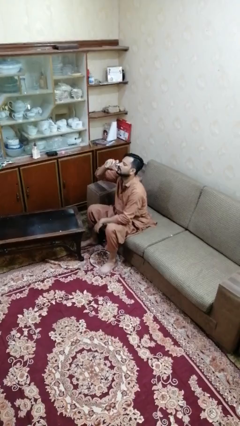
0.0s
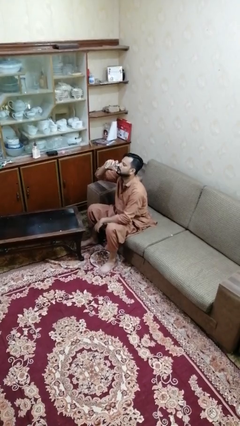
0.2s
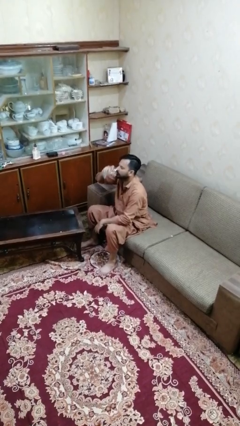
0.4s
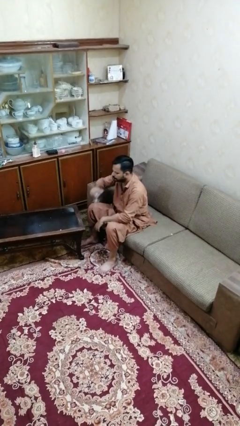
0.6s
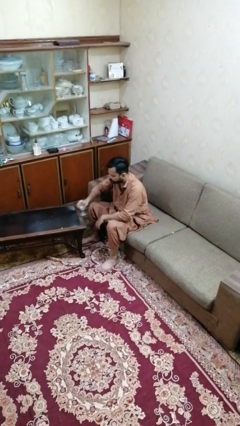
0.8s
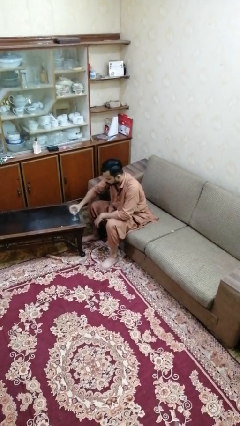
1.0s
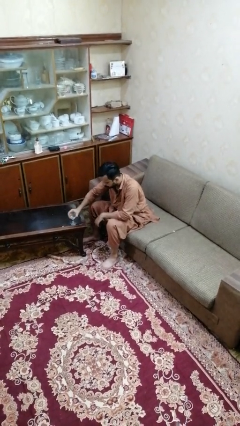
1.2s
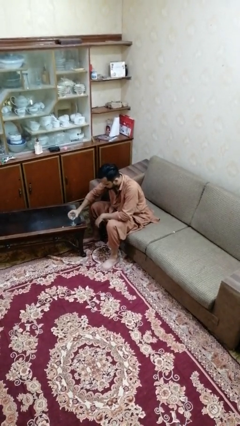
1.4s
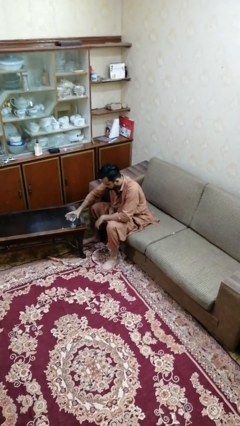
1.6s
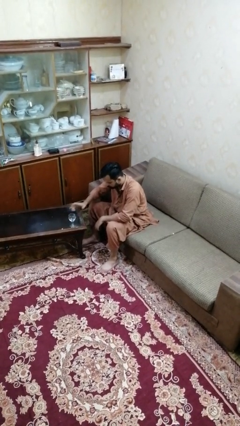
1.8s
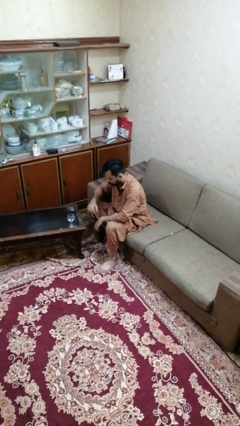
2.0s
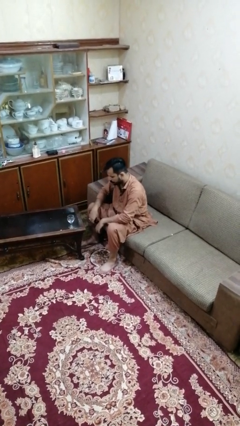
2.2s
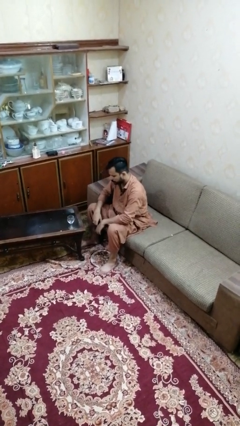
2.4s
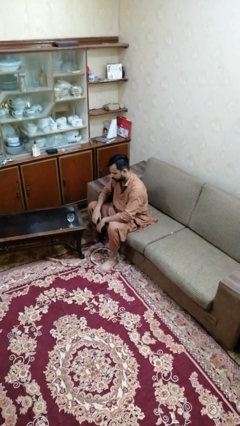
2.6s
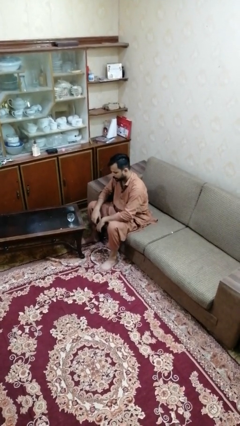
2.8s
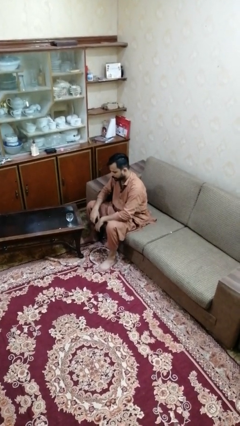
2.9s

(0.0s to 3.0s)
person puts down object on table

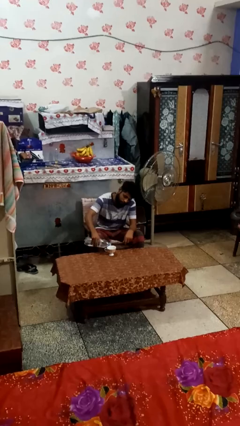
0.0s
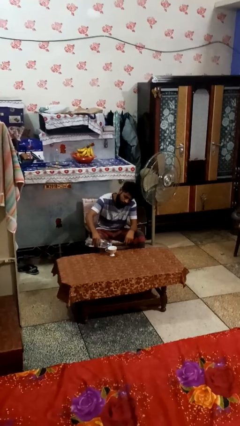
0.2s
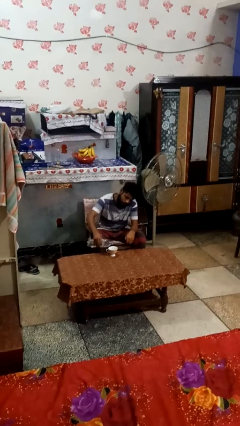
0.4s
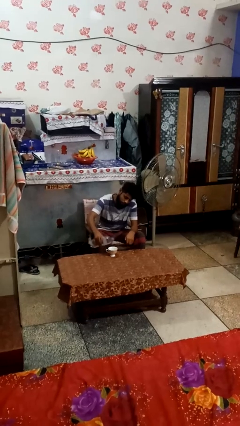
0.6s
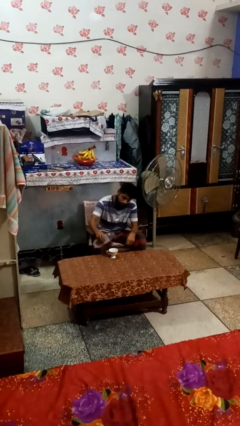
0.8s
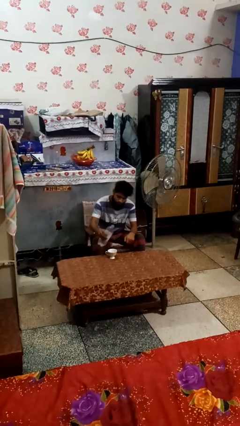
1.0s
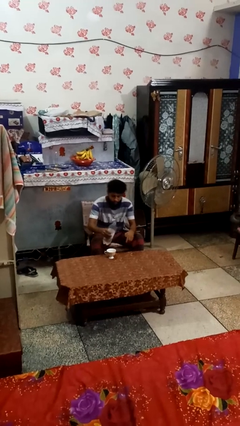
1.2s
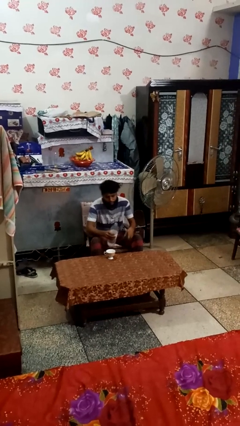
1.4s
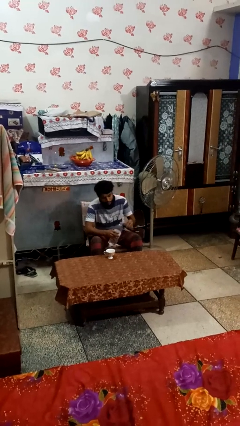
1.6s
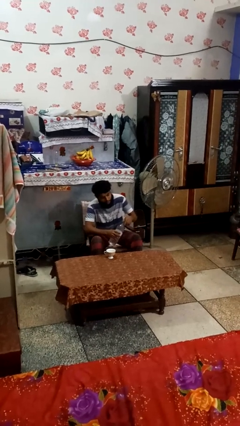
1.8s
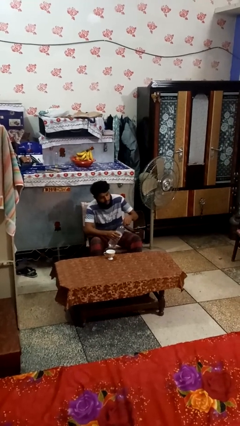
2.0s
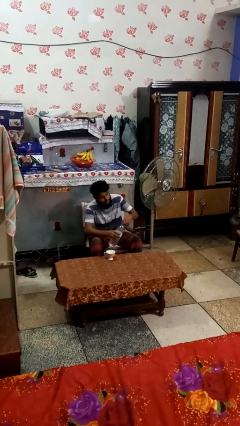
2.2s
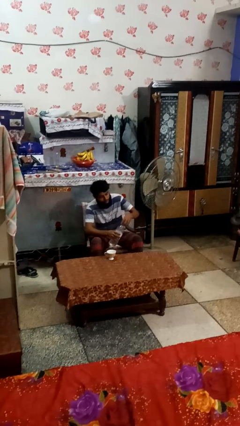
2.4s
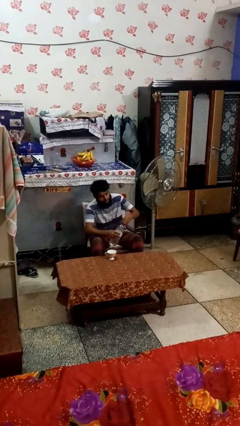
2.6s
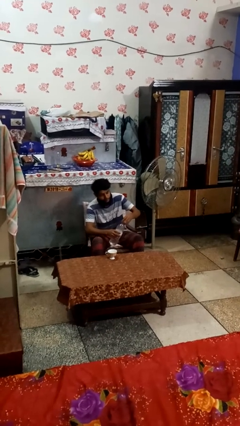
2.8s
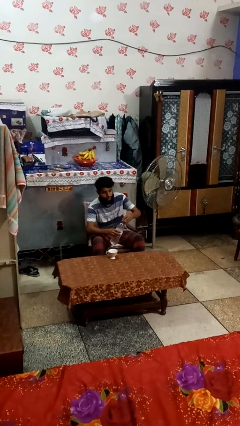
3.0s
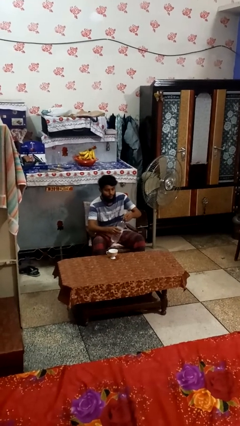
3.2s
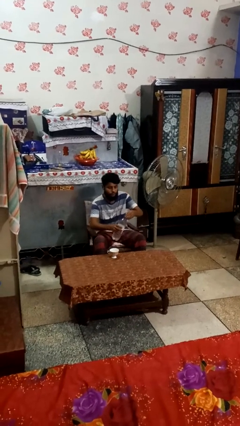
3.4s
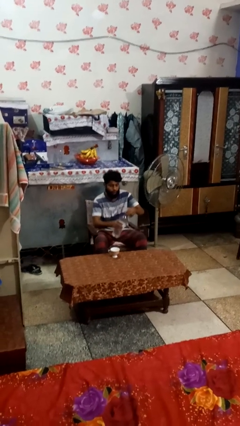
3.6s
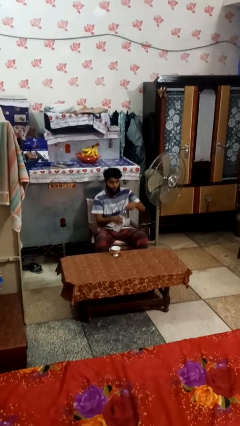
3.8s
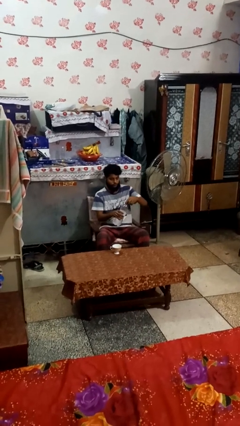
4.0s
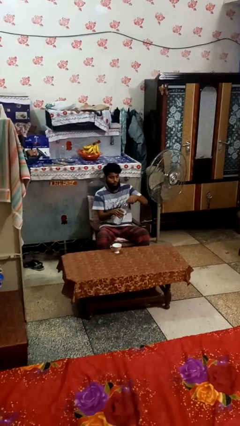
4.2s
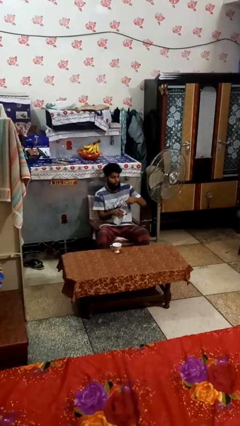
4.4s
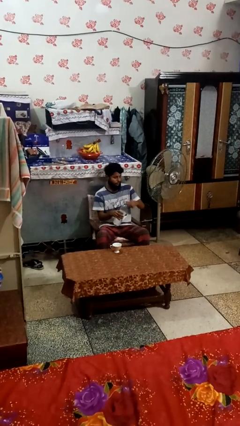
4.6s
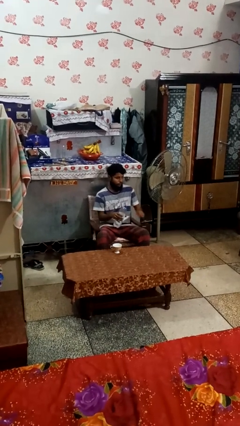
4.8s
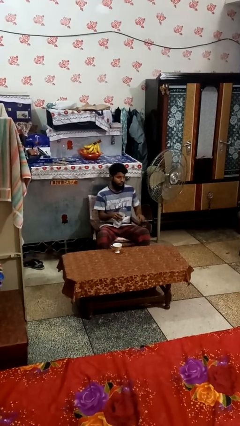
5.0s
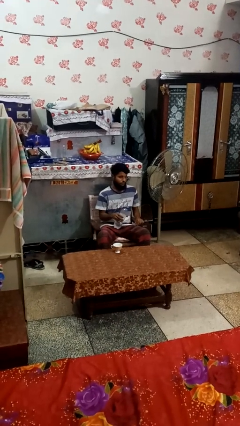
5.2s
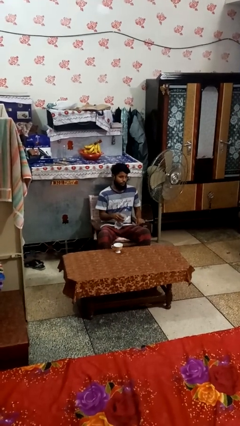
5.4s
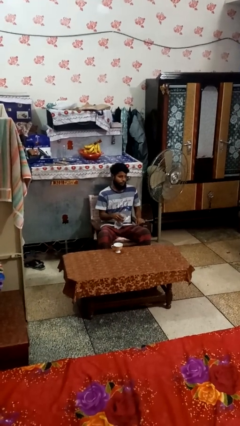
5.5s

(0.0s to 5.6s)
person screws lid to bottle

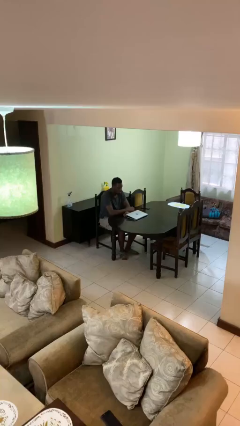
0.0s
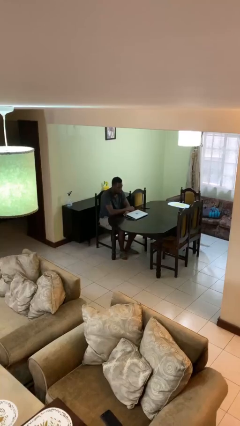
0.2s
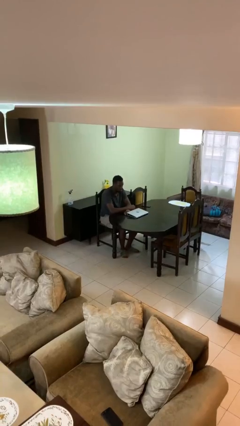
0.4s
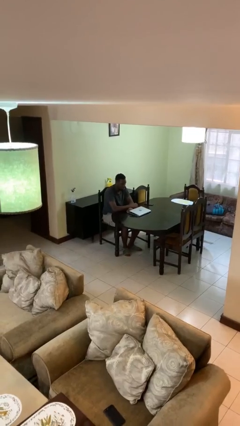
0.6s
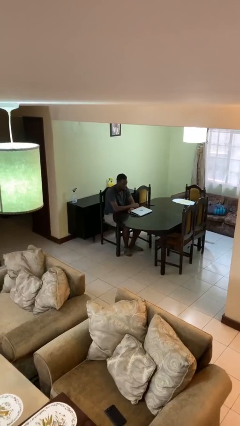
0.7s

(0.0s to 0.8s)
person interacts with laptop

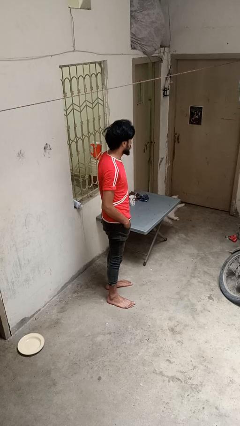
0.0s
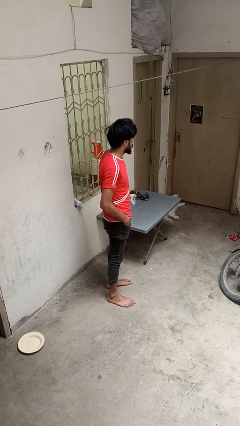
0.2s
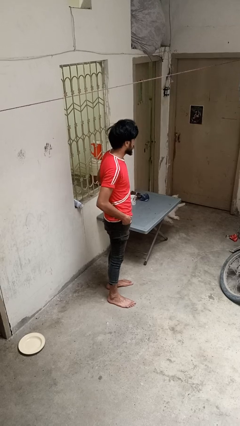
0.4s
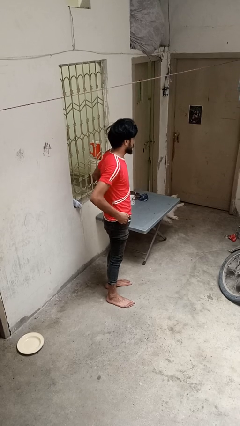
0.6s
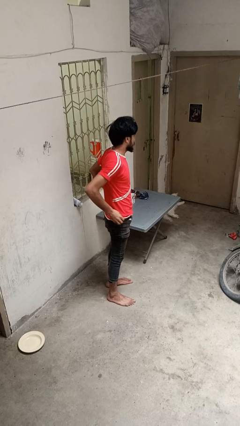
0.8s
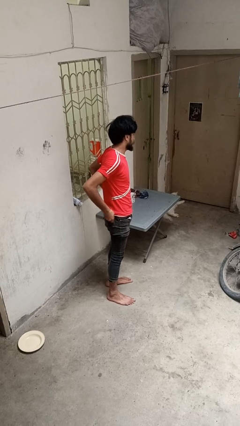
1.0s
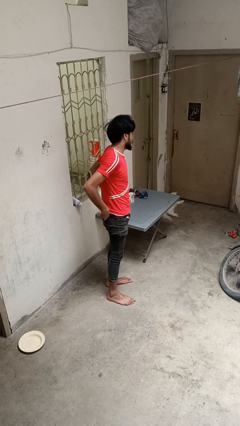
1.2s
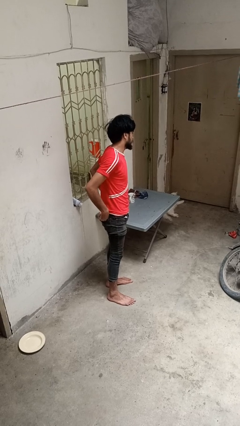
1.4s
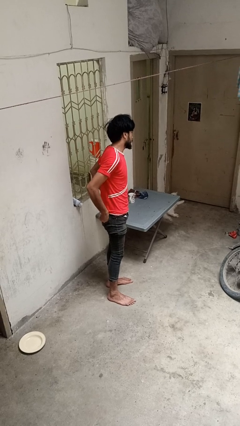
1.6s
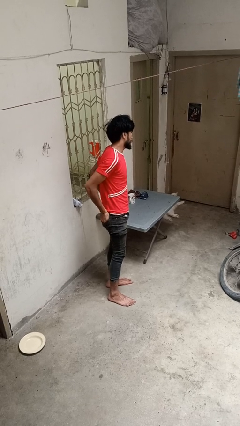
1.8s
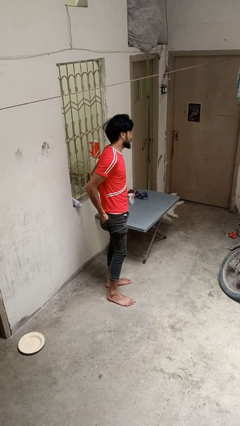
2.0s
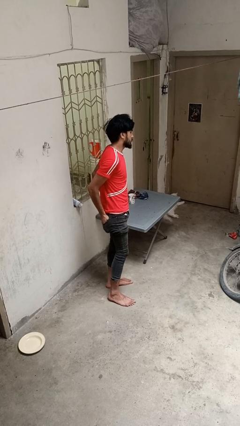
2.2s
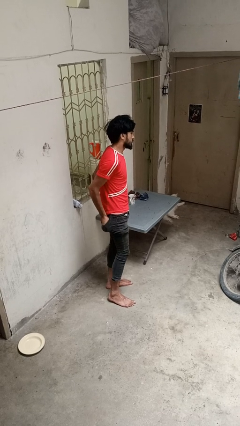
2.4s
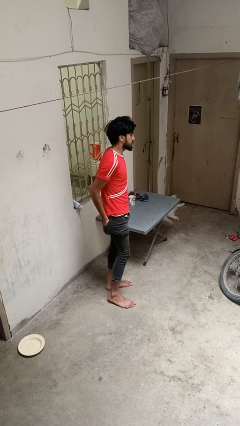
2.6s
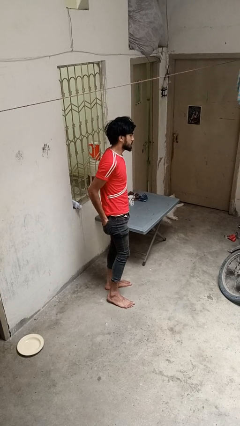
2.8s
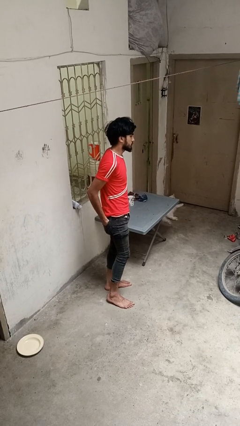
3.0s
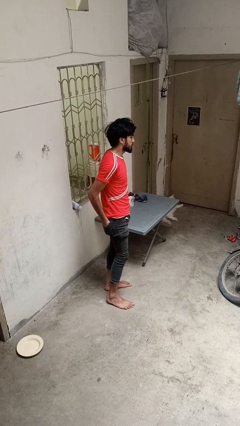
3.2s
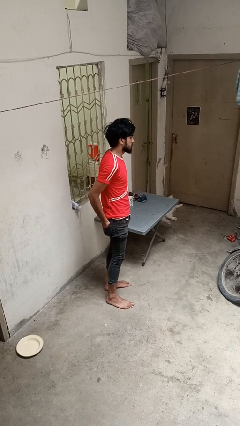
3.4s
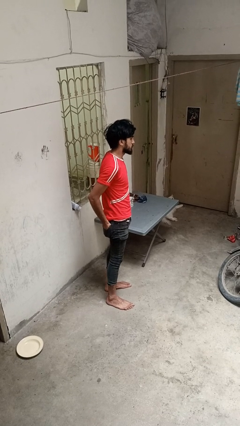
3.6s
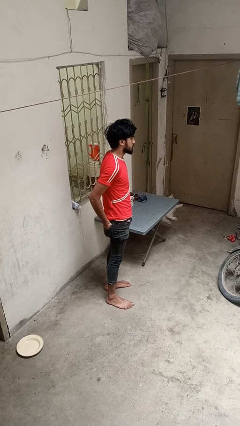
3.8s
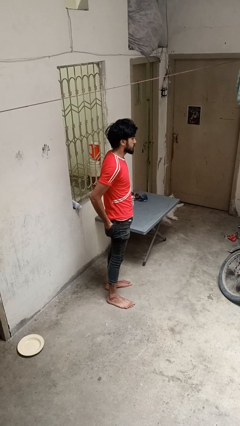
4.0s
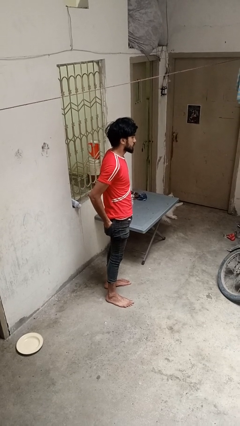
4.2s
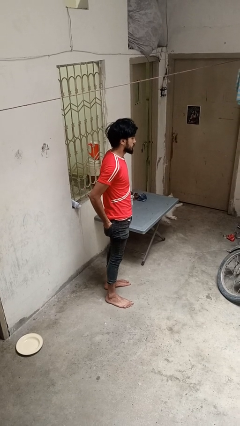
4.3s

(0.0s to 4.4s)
person puts hands in back pockets

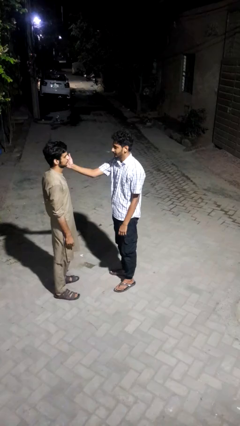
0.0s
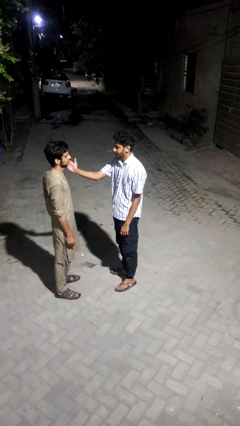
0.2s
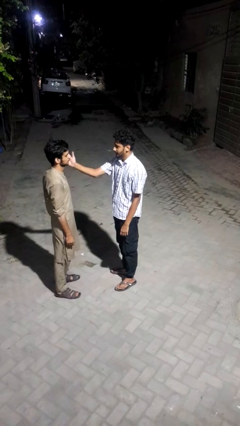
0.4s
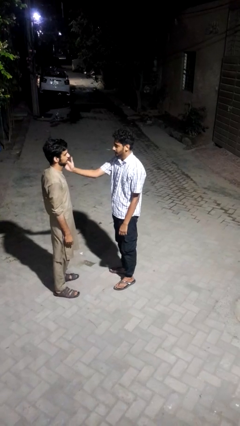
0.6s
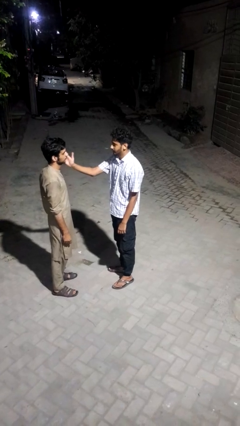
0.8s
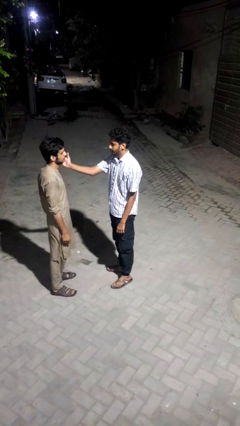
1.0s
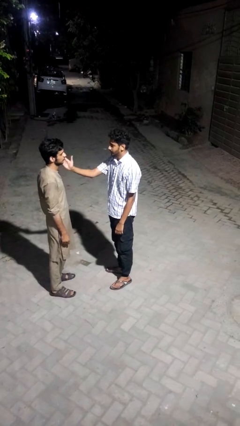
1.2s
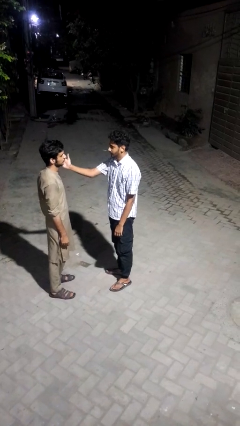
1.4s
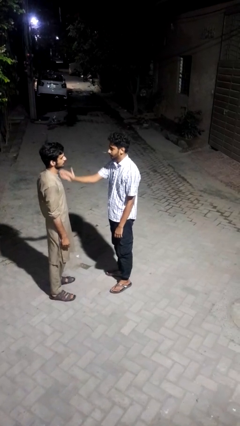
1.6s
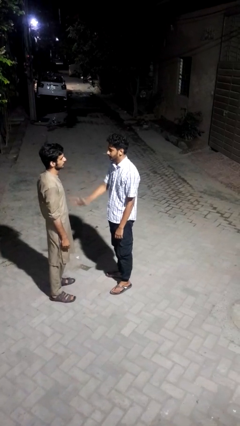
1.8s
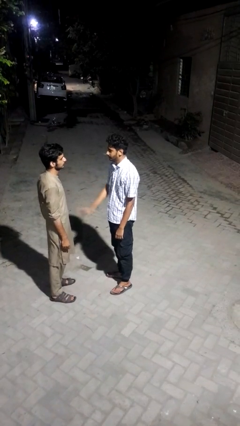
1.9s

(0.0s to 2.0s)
person touches face of person

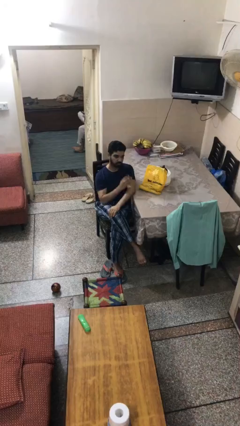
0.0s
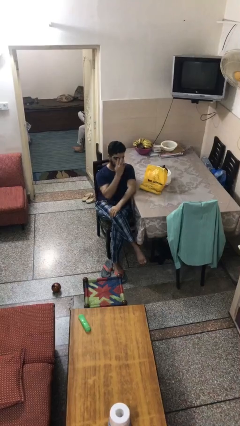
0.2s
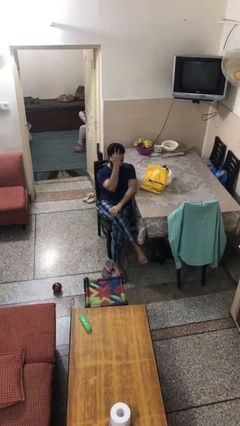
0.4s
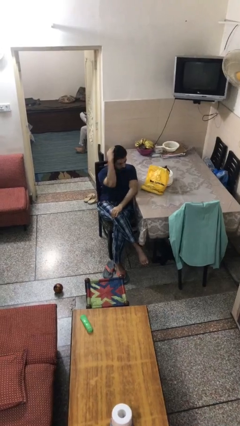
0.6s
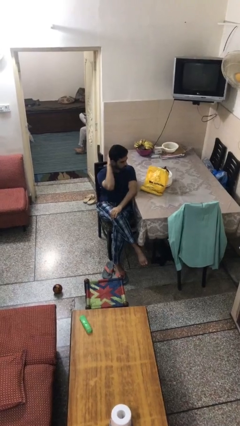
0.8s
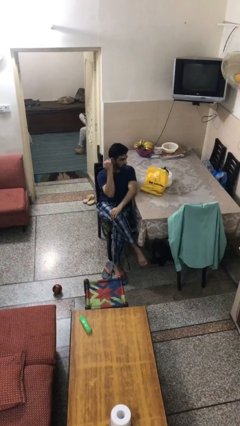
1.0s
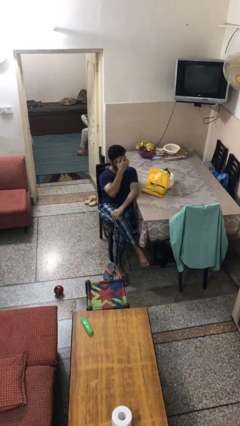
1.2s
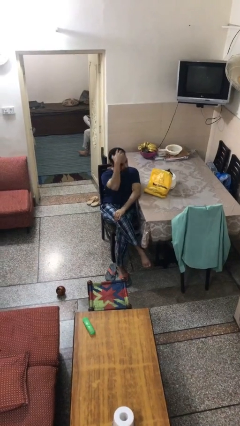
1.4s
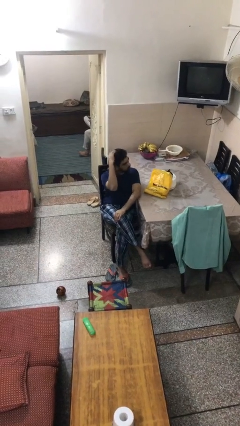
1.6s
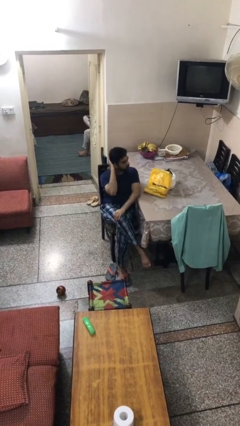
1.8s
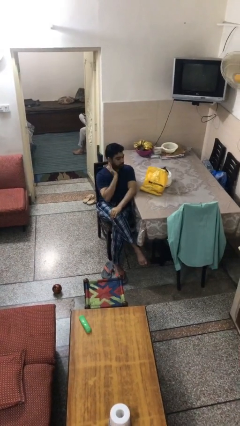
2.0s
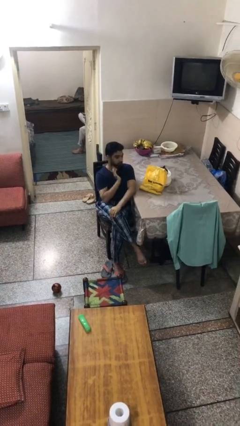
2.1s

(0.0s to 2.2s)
person strokes hair
